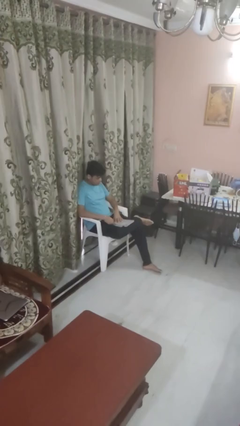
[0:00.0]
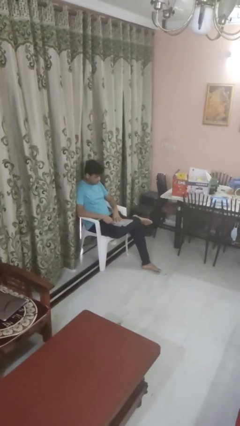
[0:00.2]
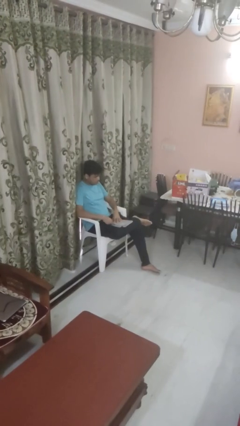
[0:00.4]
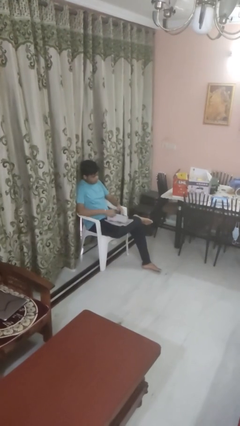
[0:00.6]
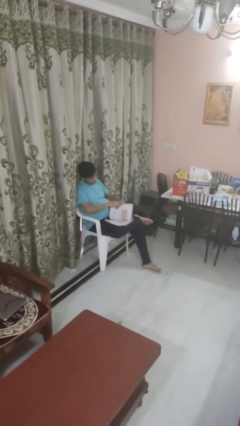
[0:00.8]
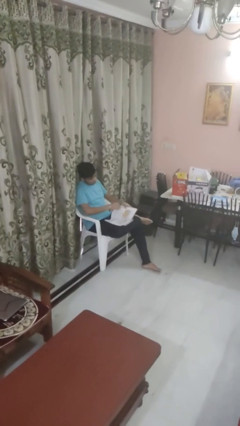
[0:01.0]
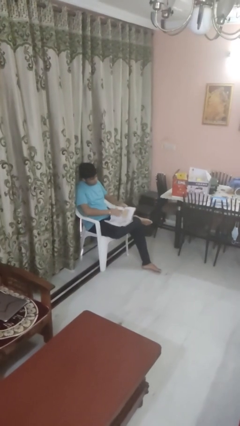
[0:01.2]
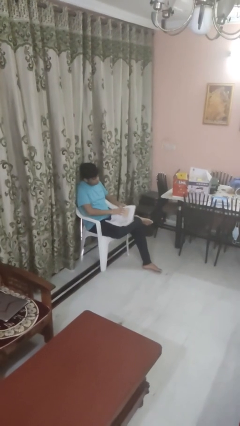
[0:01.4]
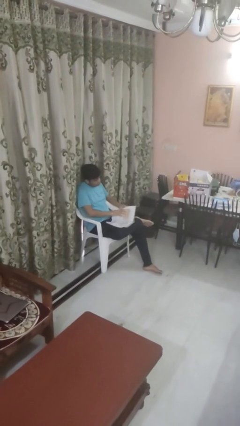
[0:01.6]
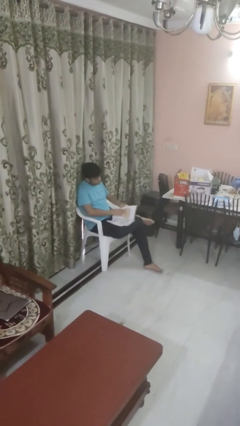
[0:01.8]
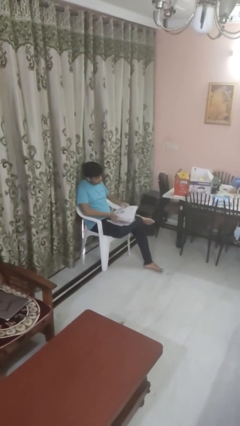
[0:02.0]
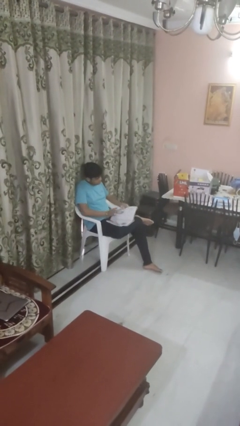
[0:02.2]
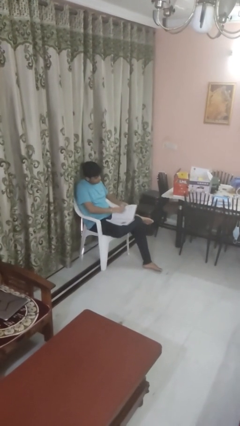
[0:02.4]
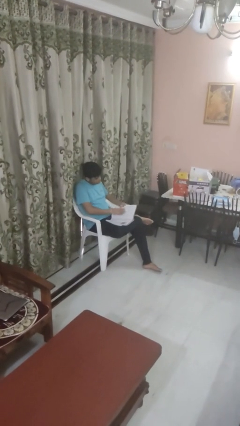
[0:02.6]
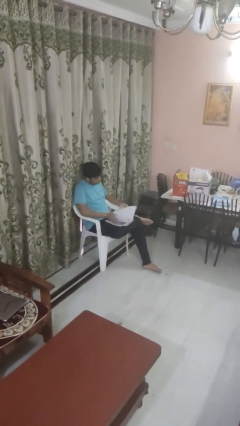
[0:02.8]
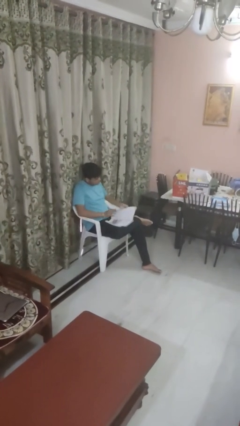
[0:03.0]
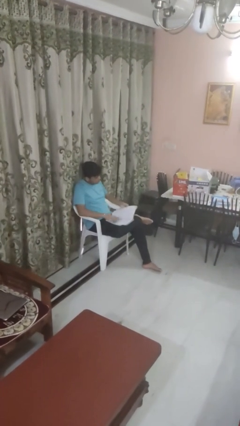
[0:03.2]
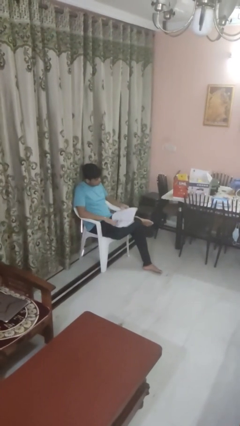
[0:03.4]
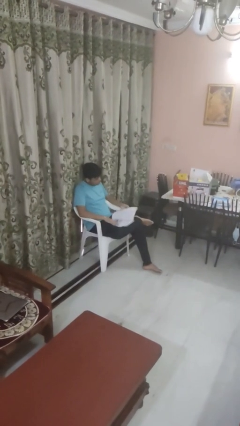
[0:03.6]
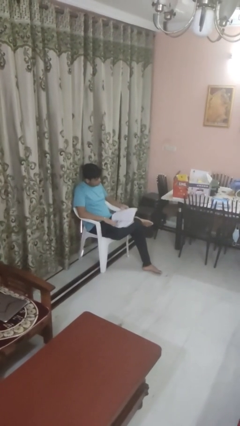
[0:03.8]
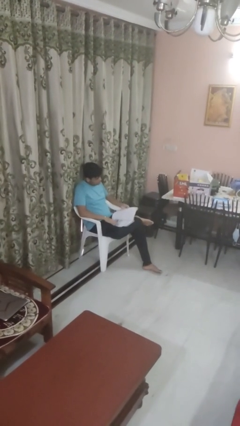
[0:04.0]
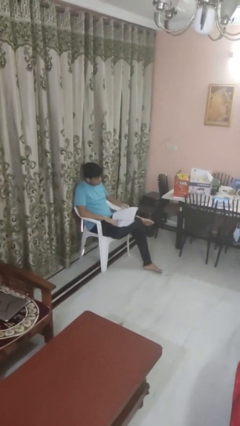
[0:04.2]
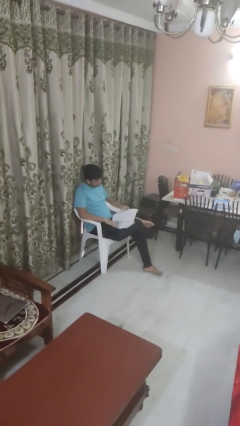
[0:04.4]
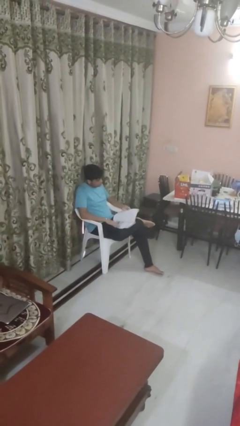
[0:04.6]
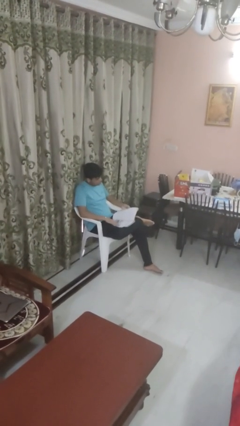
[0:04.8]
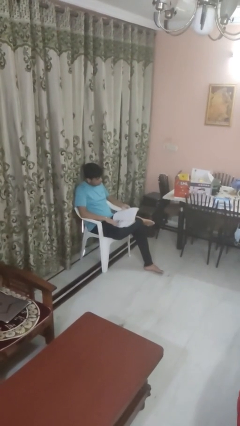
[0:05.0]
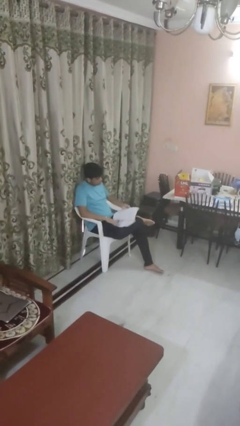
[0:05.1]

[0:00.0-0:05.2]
person reads magazine

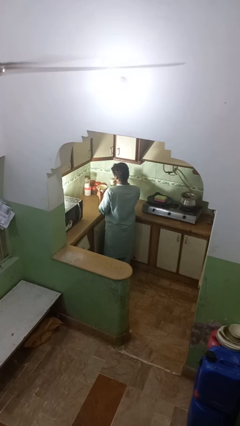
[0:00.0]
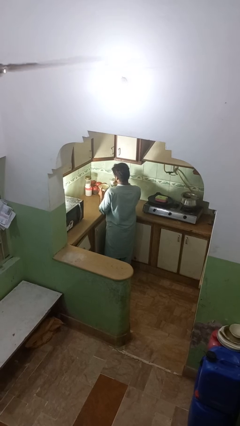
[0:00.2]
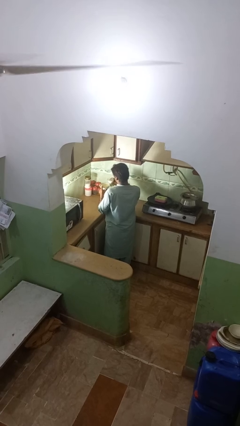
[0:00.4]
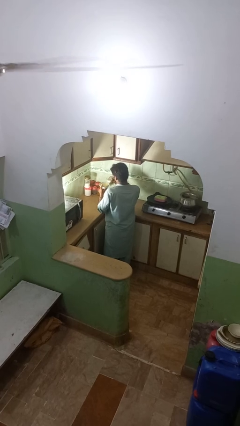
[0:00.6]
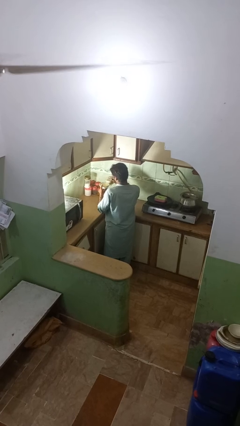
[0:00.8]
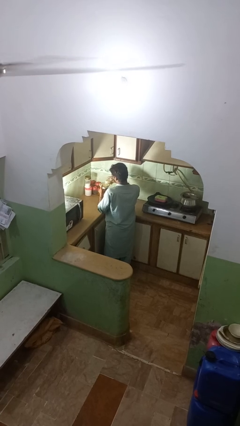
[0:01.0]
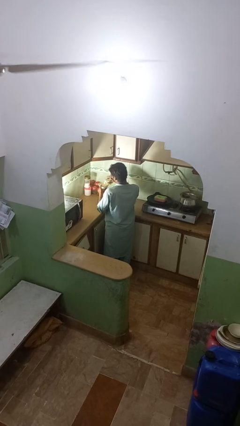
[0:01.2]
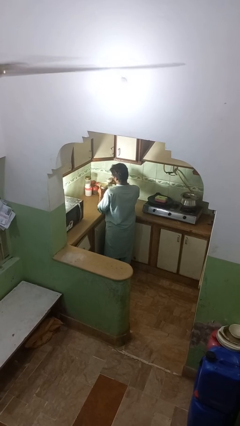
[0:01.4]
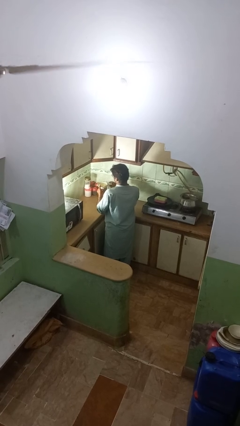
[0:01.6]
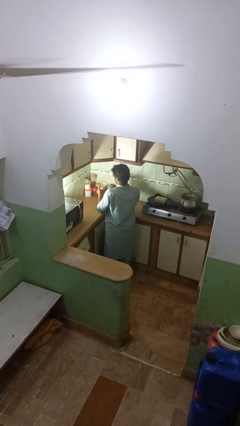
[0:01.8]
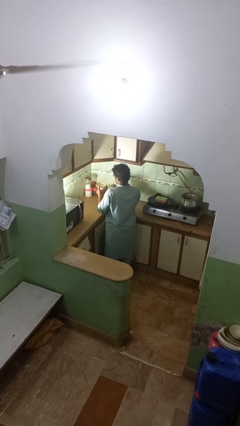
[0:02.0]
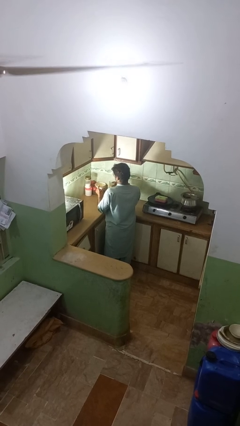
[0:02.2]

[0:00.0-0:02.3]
person pours into bowl

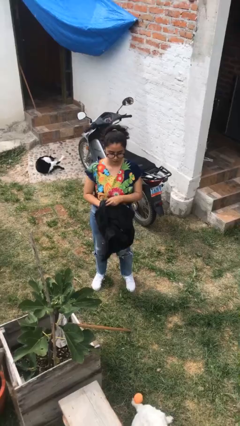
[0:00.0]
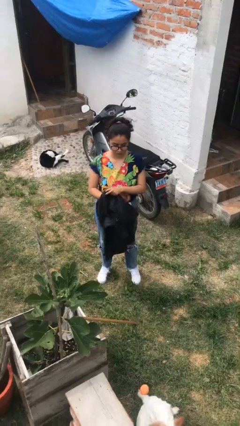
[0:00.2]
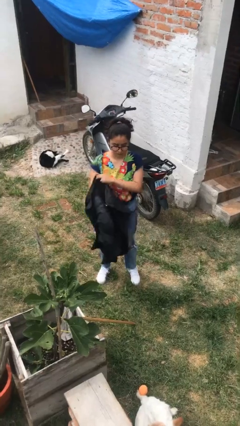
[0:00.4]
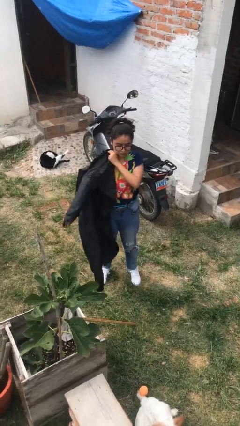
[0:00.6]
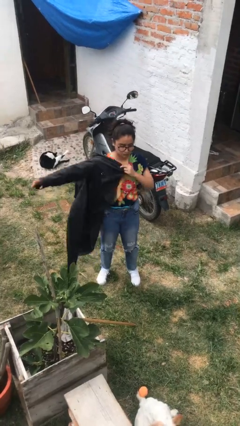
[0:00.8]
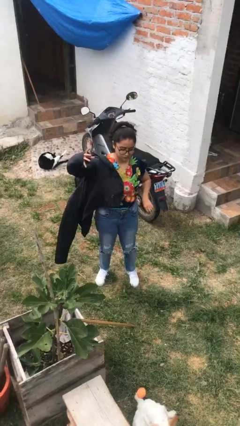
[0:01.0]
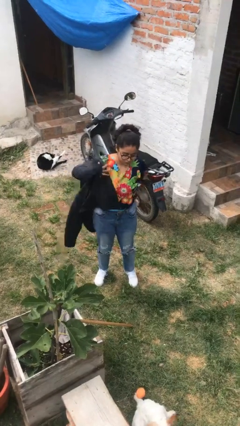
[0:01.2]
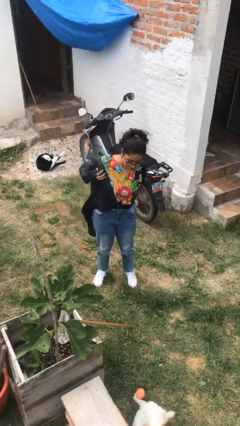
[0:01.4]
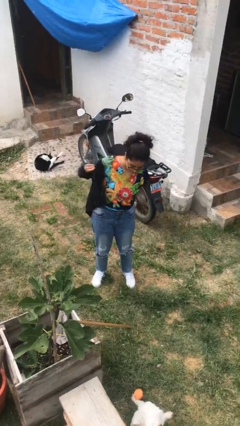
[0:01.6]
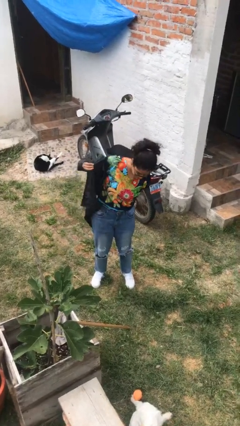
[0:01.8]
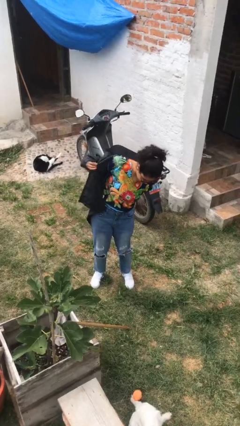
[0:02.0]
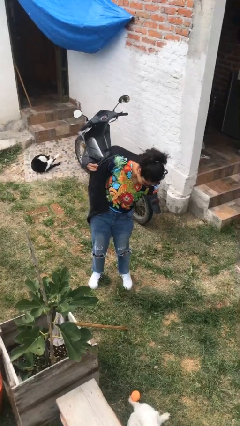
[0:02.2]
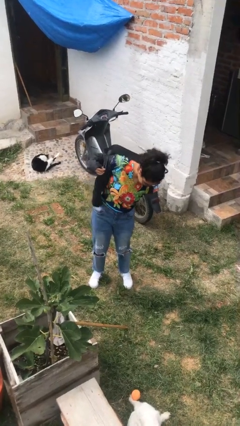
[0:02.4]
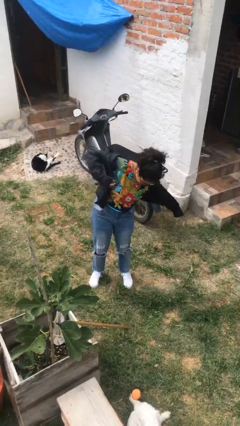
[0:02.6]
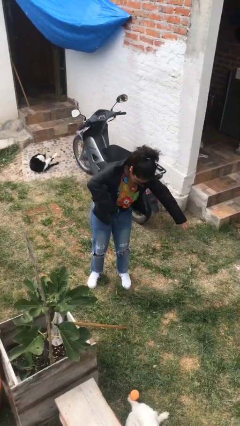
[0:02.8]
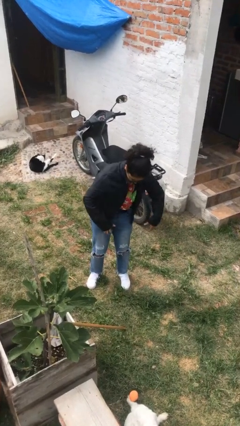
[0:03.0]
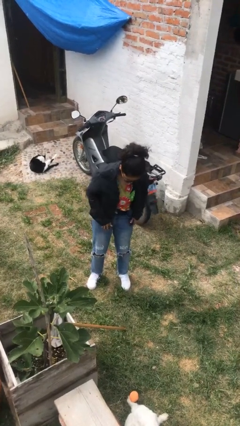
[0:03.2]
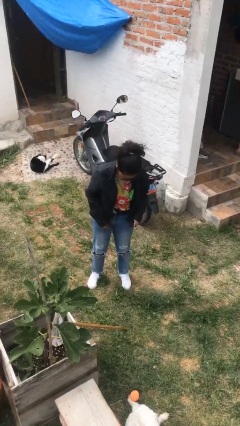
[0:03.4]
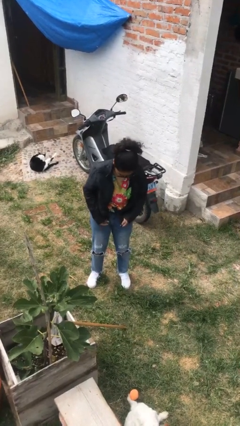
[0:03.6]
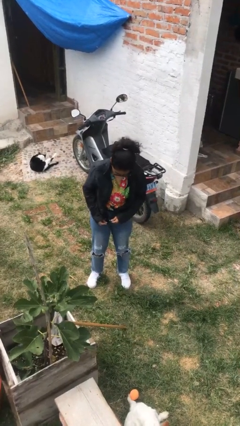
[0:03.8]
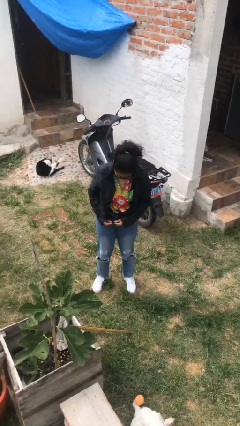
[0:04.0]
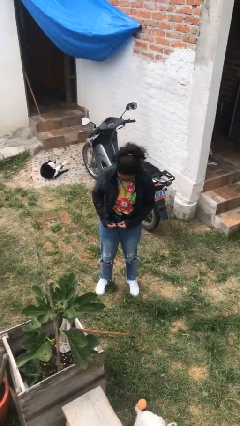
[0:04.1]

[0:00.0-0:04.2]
person puts on jacket

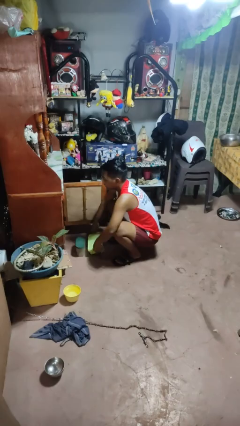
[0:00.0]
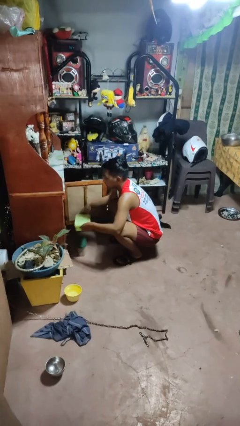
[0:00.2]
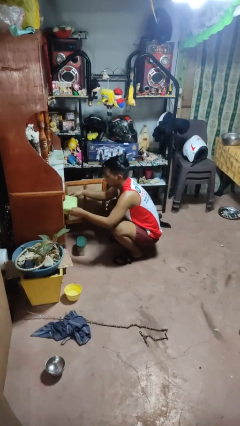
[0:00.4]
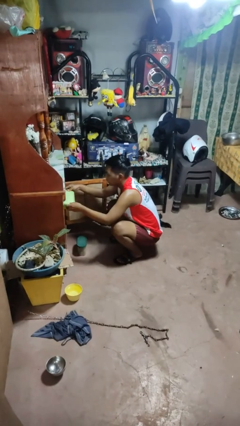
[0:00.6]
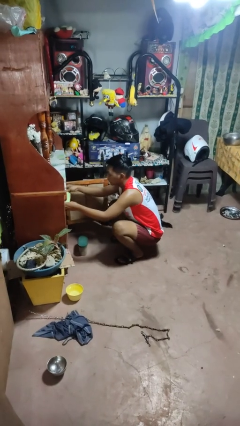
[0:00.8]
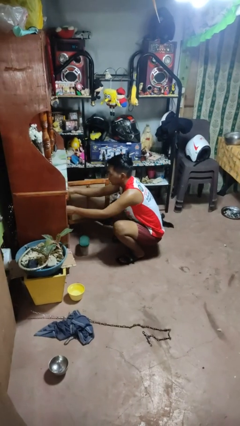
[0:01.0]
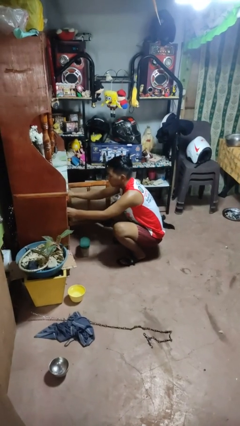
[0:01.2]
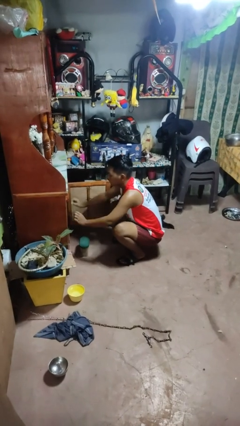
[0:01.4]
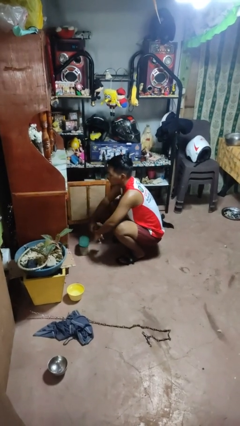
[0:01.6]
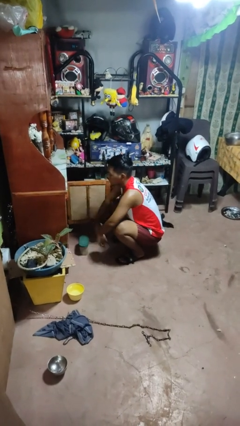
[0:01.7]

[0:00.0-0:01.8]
person puts object in cabinet

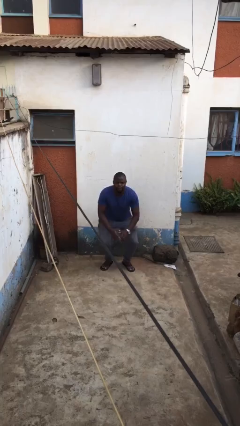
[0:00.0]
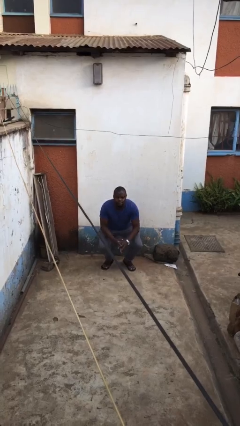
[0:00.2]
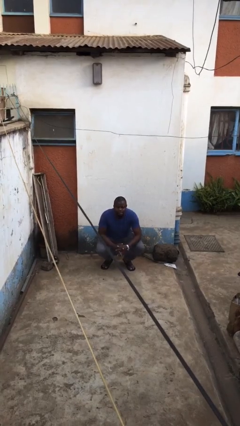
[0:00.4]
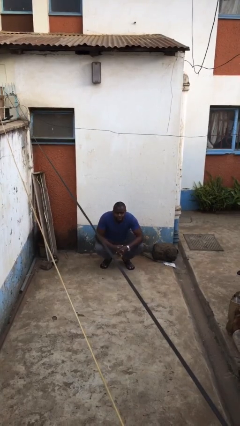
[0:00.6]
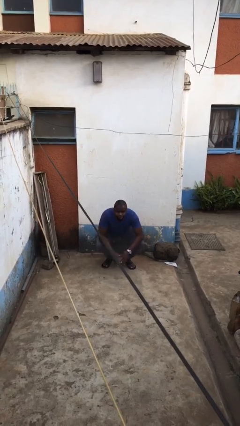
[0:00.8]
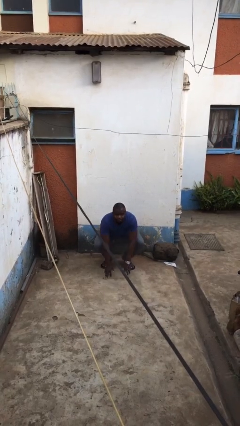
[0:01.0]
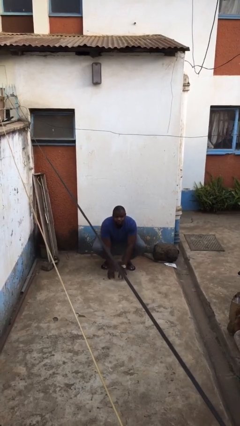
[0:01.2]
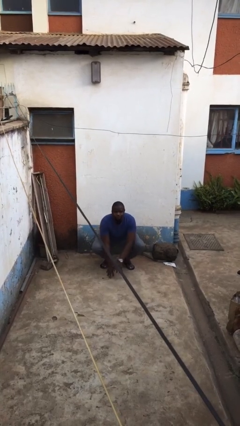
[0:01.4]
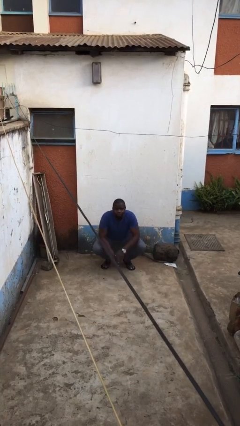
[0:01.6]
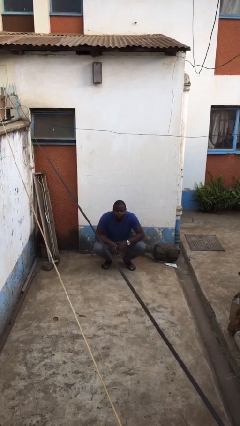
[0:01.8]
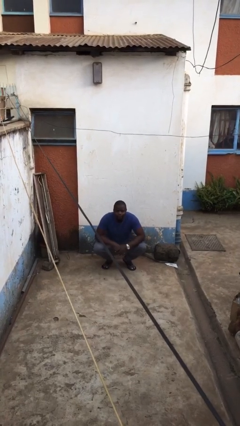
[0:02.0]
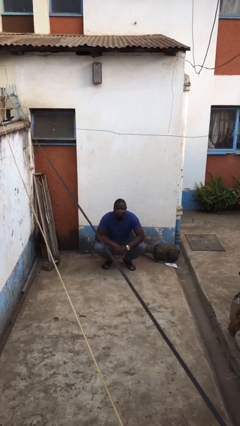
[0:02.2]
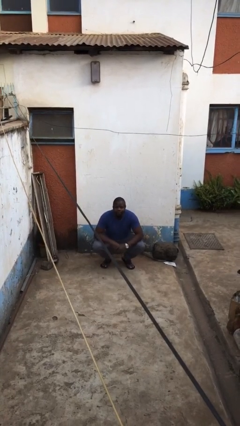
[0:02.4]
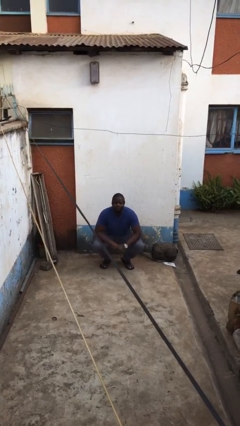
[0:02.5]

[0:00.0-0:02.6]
person squats

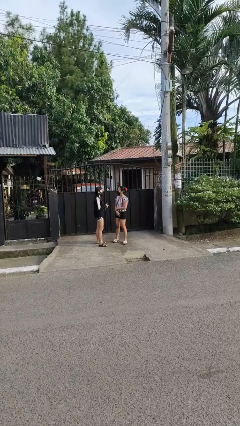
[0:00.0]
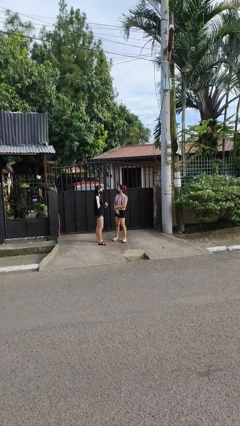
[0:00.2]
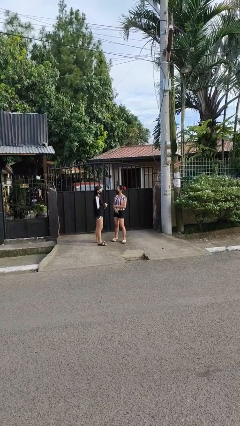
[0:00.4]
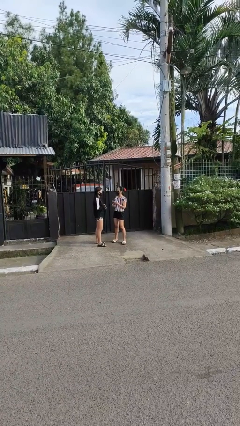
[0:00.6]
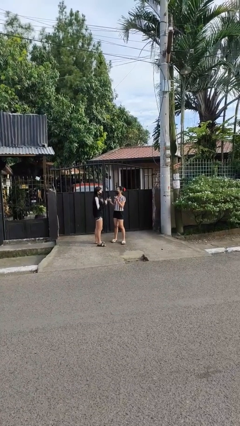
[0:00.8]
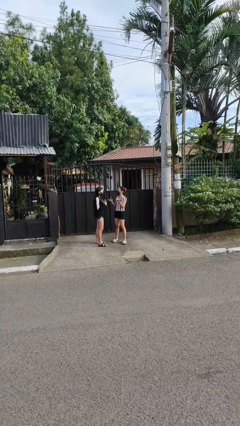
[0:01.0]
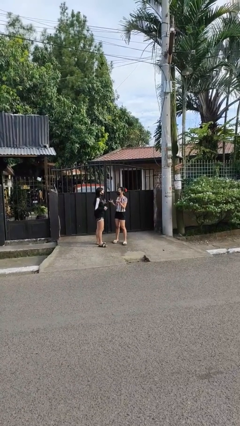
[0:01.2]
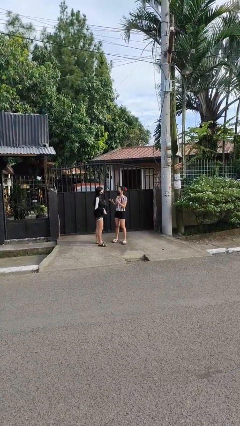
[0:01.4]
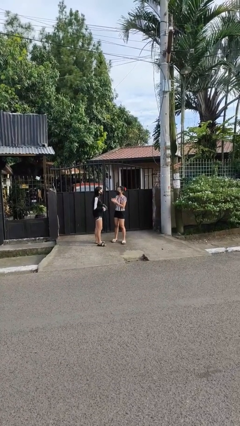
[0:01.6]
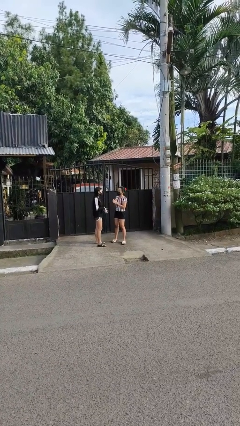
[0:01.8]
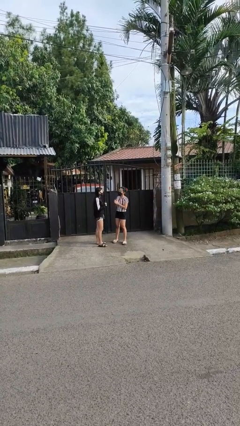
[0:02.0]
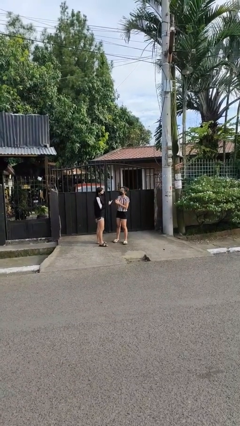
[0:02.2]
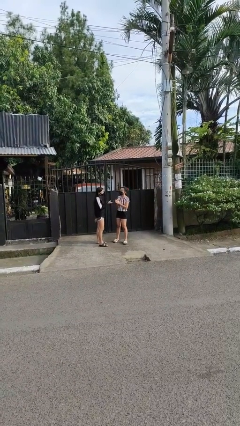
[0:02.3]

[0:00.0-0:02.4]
person talks to person
